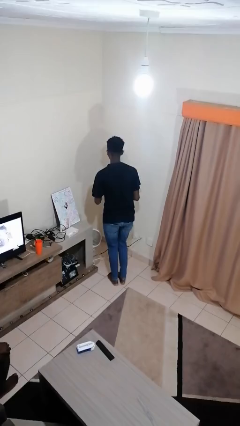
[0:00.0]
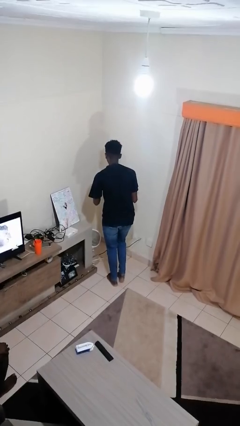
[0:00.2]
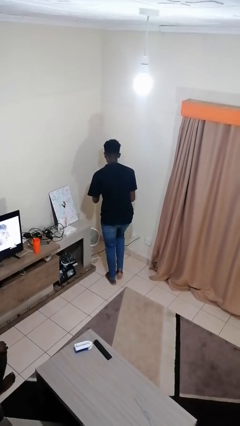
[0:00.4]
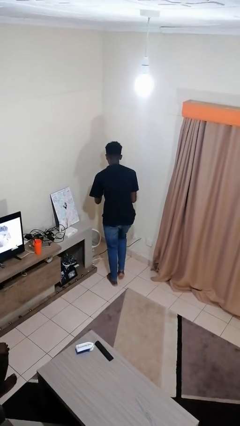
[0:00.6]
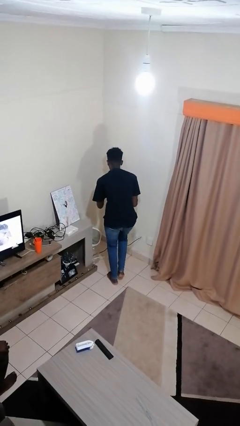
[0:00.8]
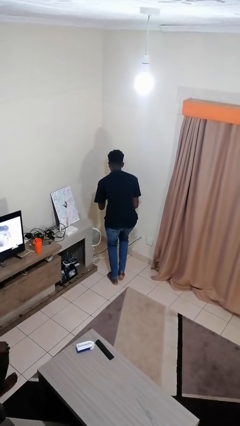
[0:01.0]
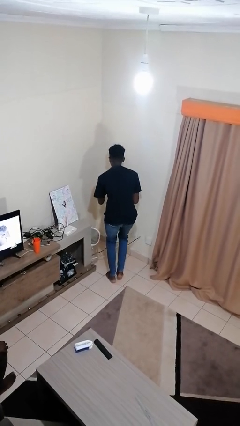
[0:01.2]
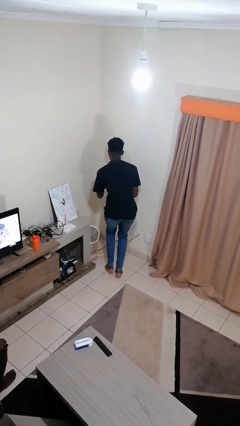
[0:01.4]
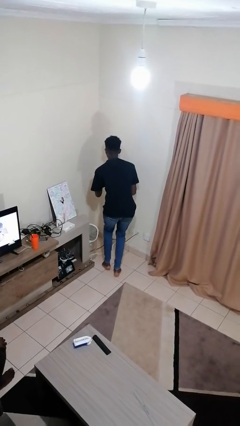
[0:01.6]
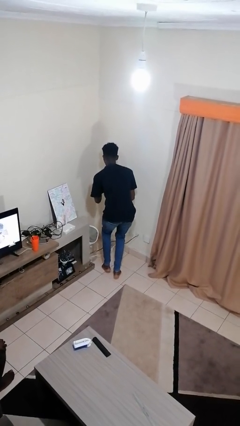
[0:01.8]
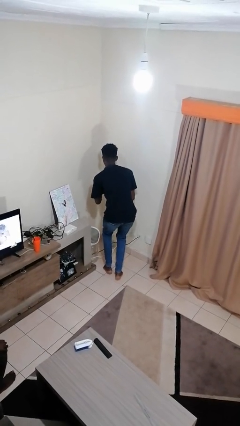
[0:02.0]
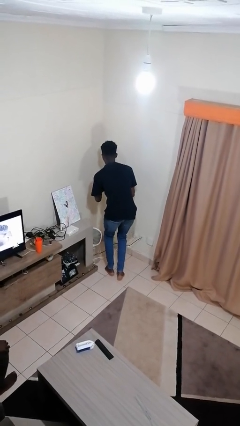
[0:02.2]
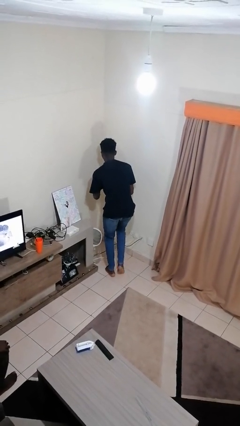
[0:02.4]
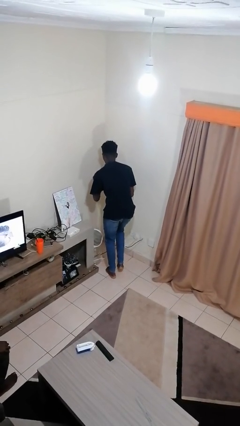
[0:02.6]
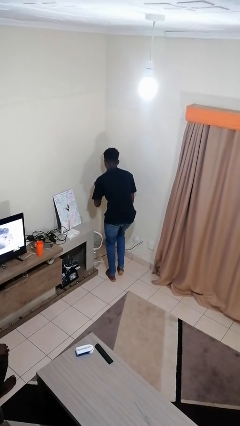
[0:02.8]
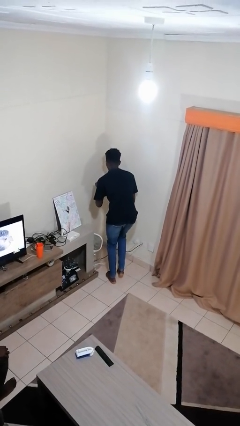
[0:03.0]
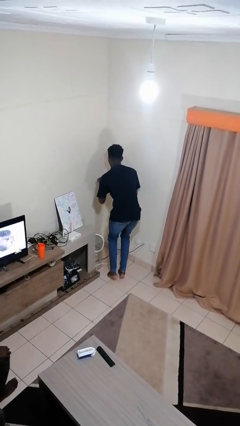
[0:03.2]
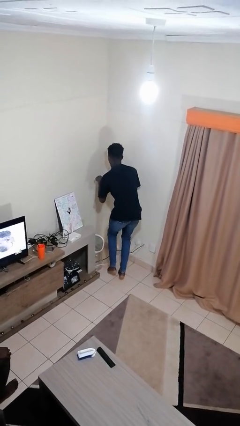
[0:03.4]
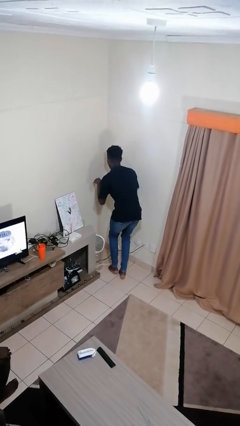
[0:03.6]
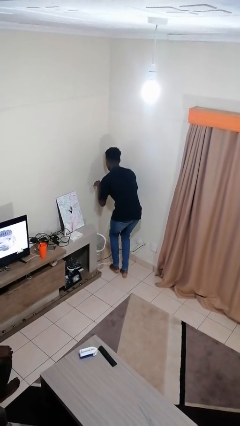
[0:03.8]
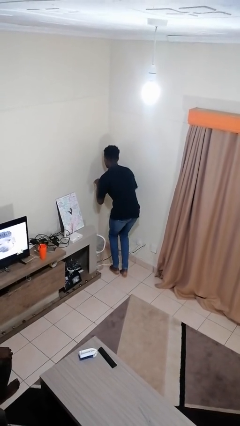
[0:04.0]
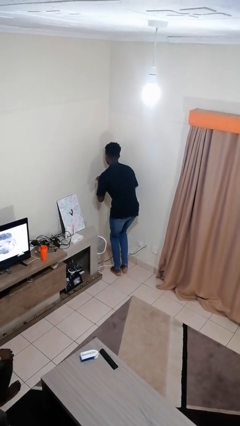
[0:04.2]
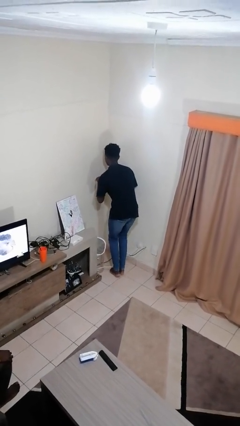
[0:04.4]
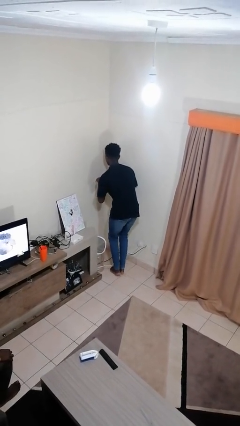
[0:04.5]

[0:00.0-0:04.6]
person walks tiptoe

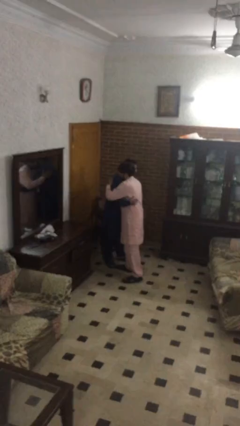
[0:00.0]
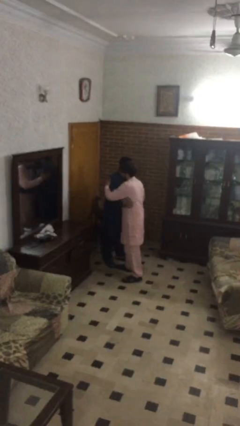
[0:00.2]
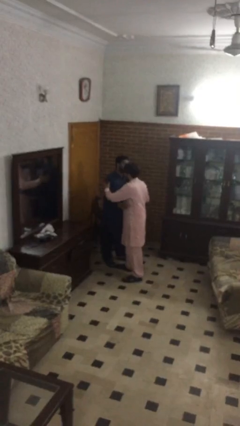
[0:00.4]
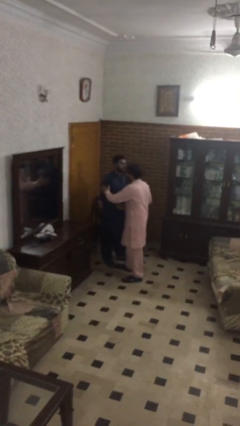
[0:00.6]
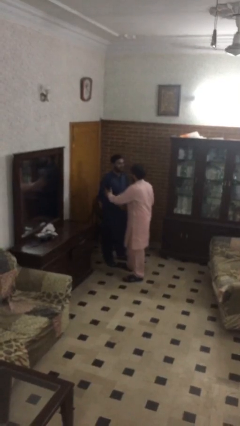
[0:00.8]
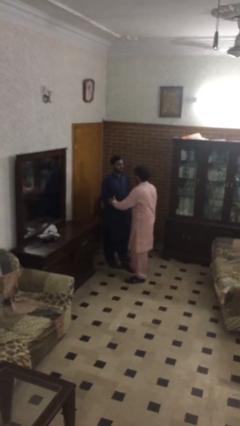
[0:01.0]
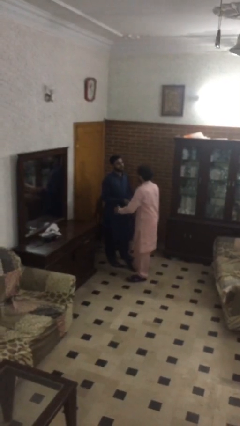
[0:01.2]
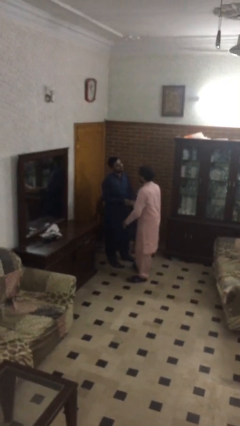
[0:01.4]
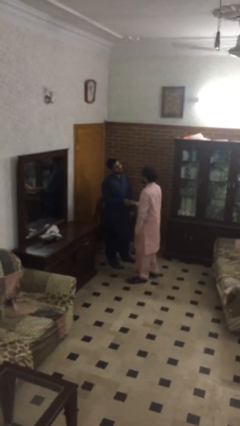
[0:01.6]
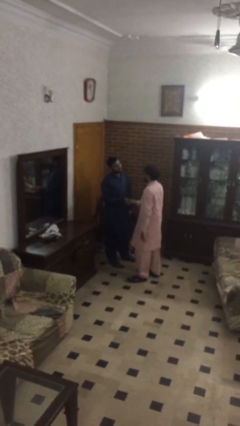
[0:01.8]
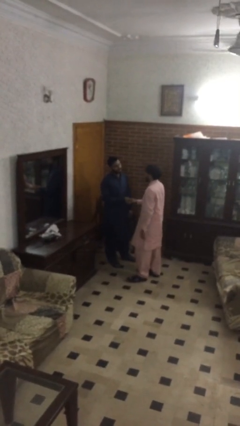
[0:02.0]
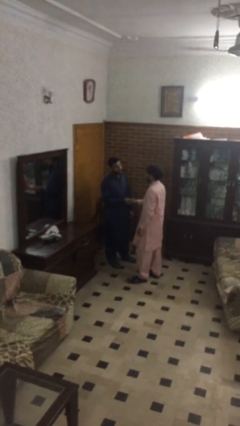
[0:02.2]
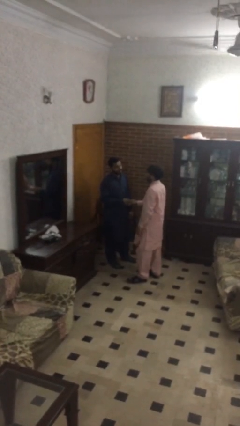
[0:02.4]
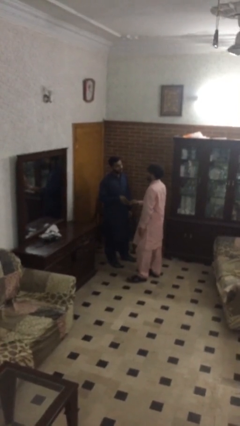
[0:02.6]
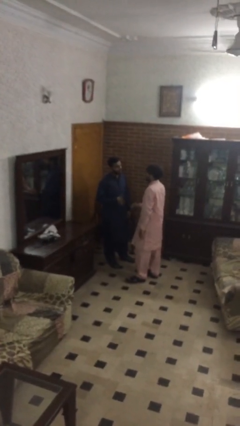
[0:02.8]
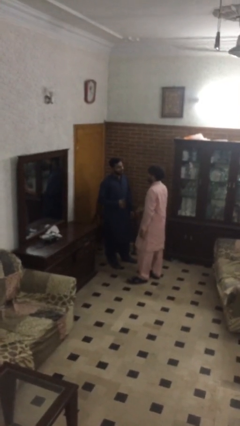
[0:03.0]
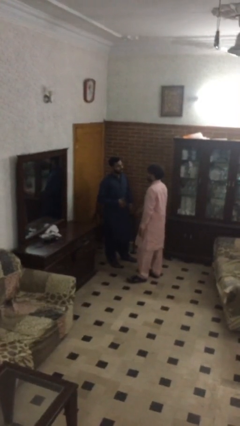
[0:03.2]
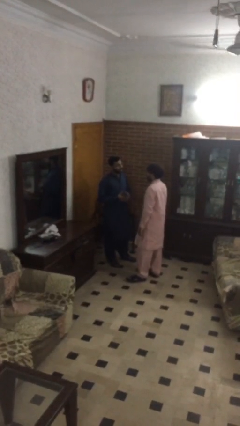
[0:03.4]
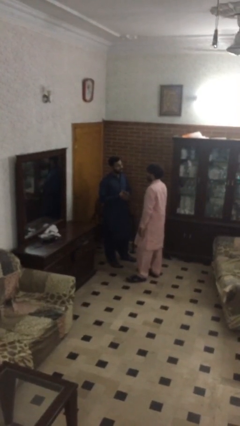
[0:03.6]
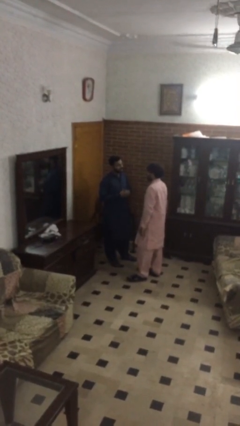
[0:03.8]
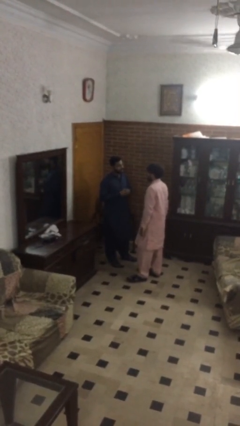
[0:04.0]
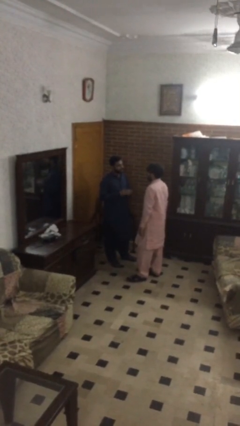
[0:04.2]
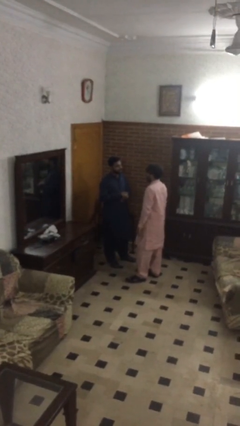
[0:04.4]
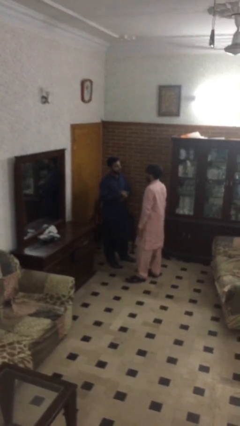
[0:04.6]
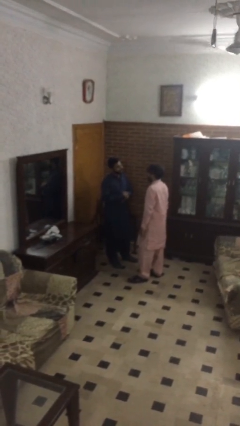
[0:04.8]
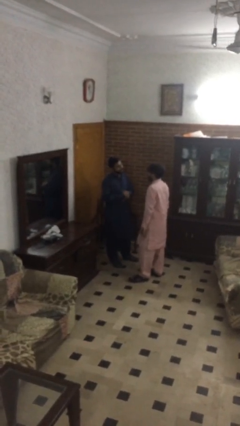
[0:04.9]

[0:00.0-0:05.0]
person talks to person

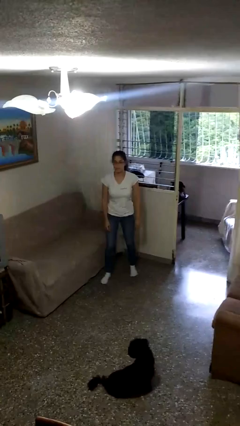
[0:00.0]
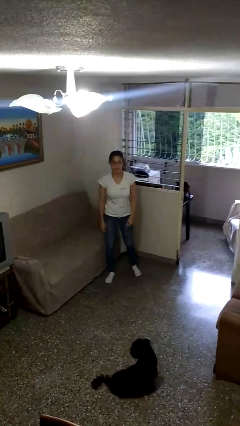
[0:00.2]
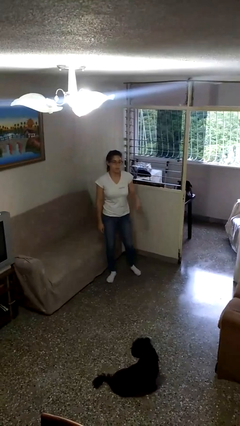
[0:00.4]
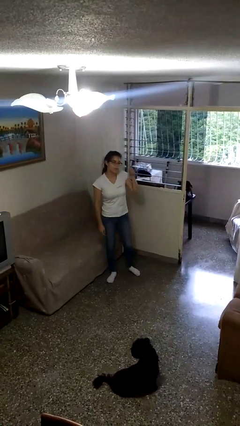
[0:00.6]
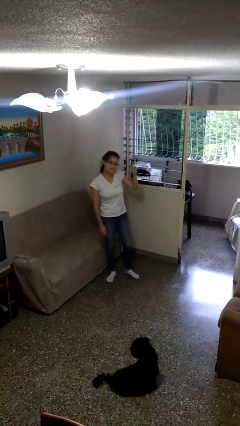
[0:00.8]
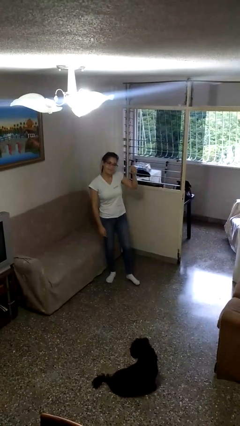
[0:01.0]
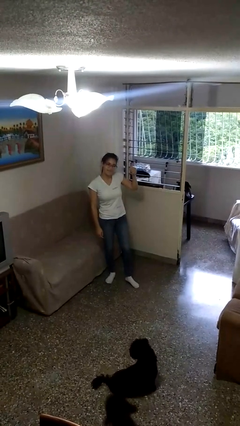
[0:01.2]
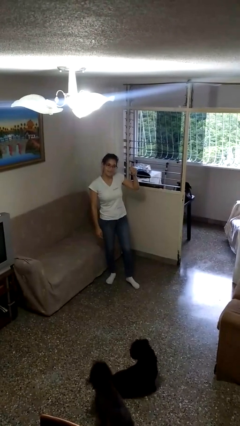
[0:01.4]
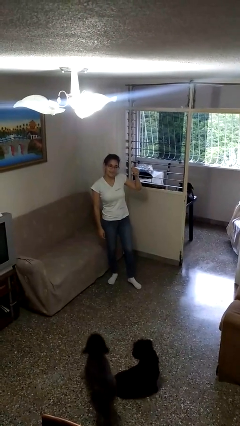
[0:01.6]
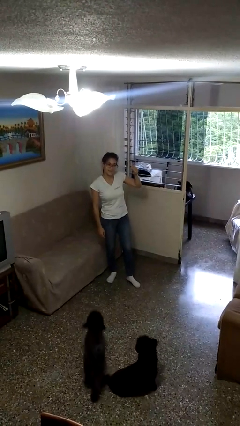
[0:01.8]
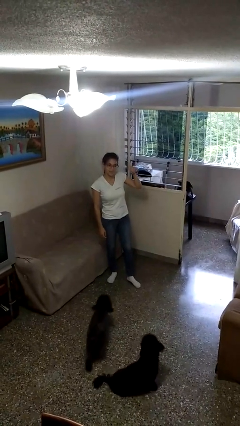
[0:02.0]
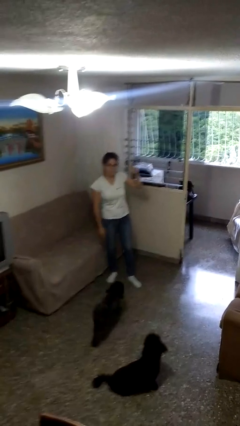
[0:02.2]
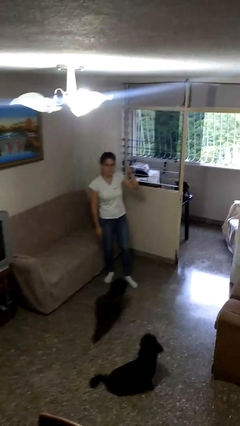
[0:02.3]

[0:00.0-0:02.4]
person gestures thumbs up

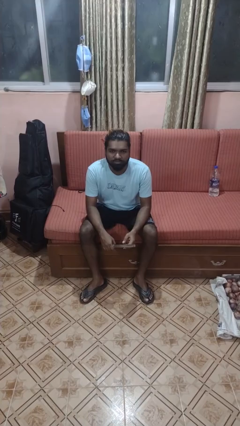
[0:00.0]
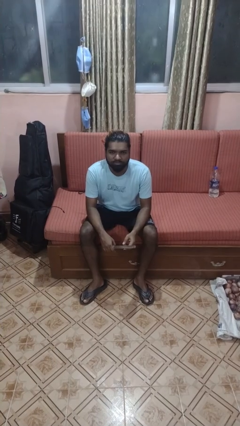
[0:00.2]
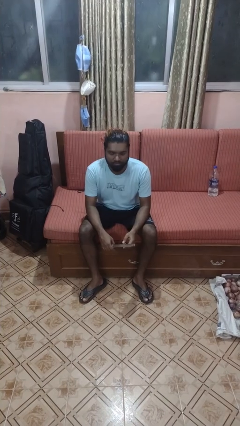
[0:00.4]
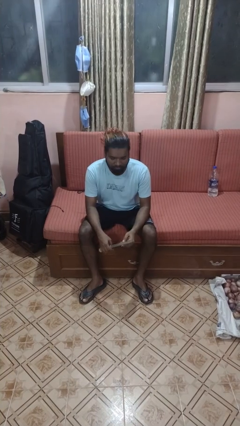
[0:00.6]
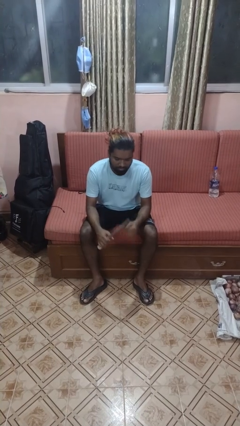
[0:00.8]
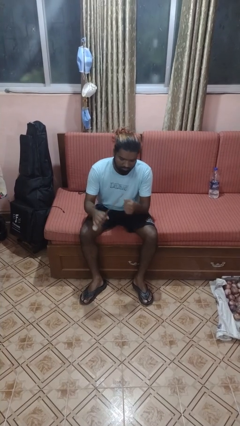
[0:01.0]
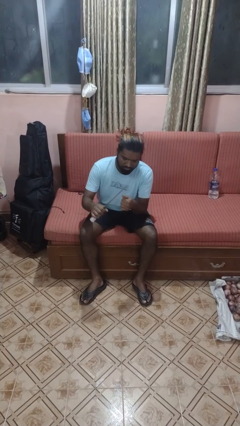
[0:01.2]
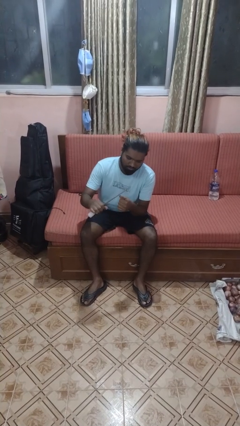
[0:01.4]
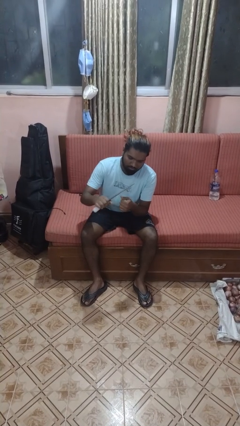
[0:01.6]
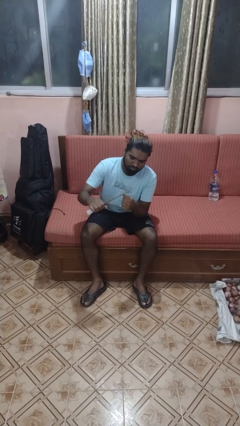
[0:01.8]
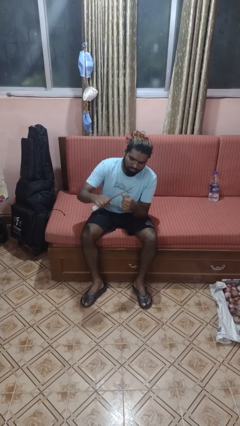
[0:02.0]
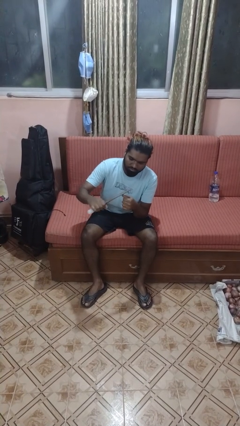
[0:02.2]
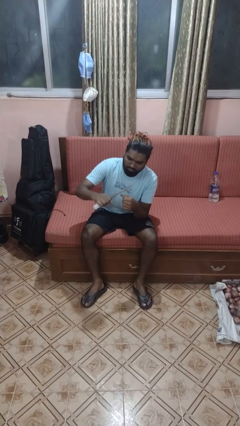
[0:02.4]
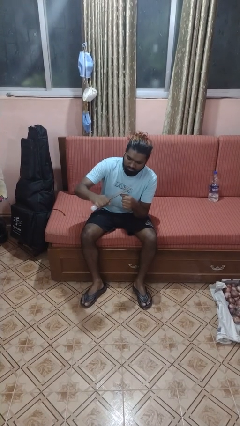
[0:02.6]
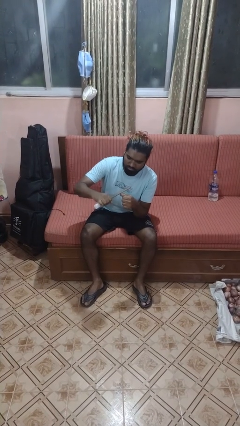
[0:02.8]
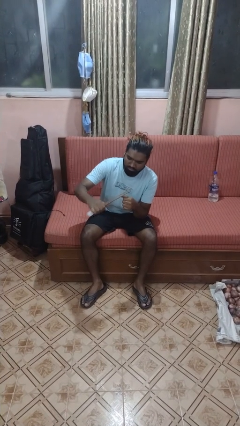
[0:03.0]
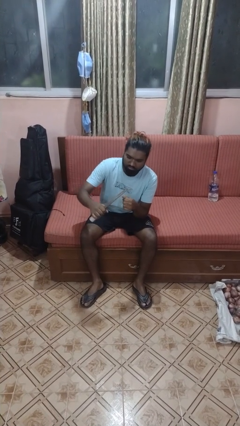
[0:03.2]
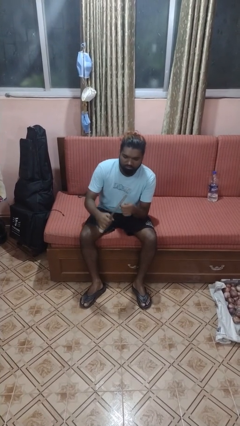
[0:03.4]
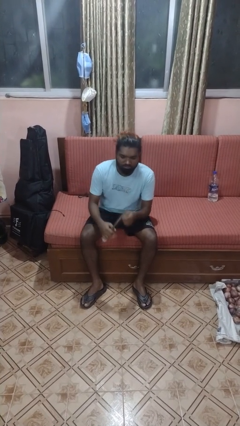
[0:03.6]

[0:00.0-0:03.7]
person files fingernails

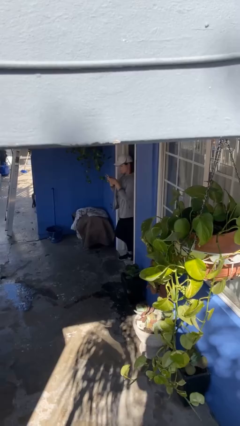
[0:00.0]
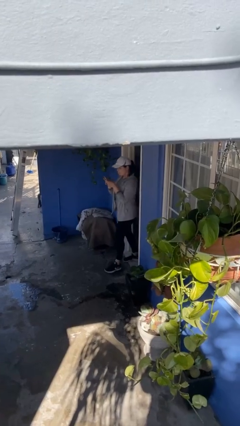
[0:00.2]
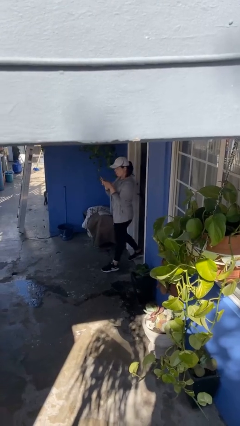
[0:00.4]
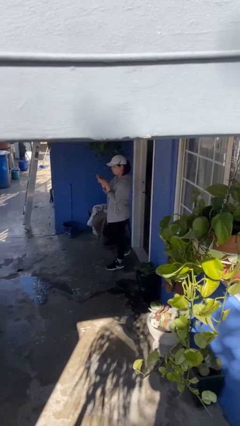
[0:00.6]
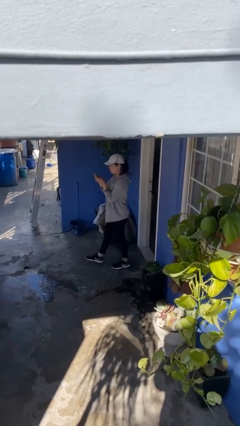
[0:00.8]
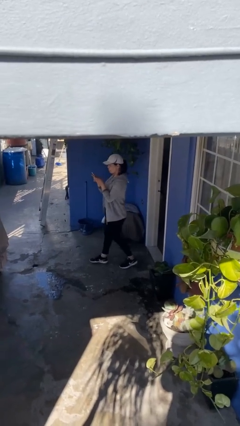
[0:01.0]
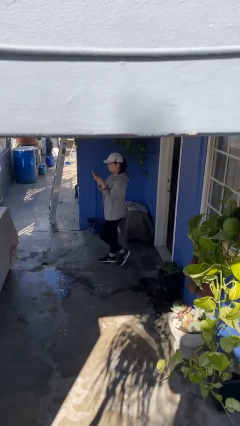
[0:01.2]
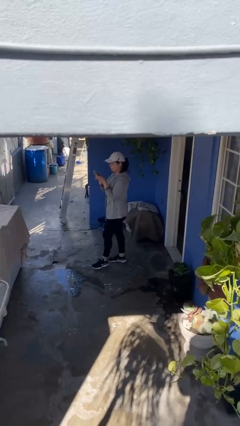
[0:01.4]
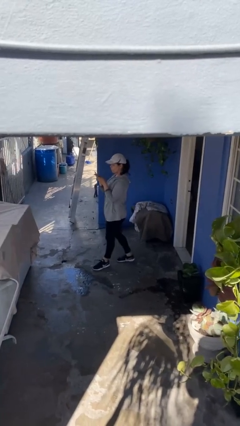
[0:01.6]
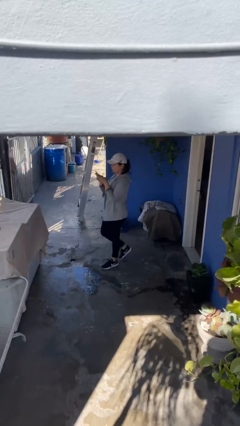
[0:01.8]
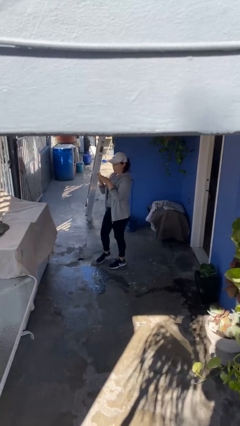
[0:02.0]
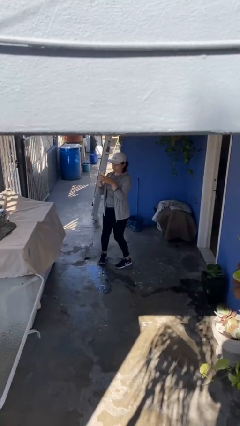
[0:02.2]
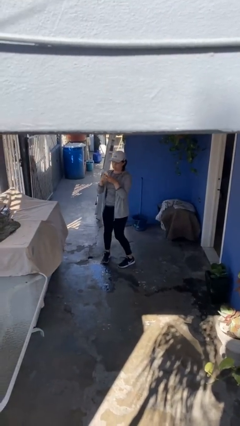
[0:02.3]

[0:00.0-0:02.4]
person enters scene through structure
